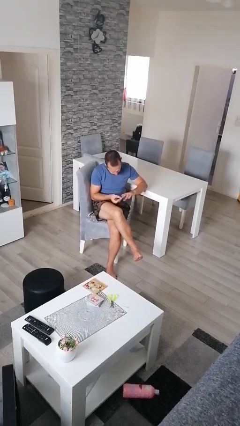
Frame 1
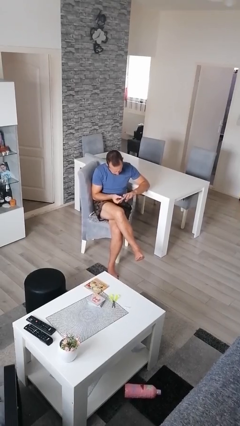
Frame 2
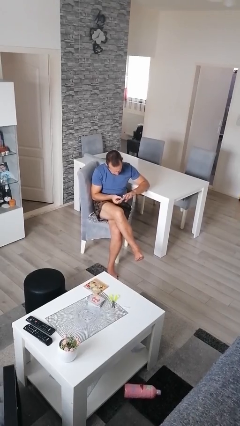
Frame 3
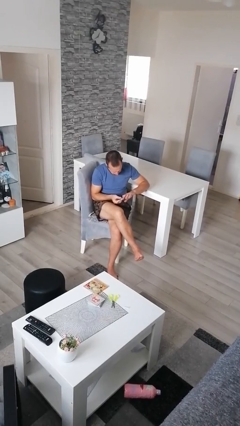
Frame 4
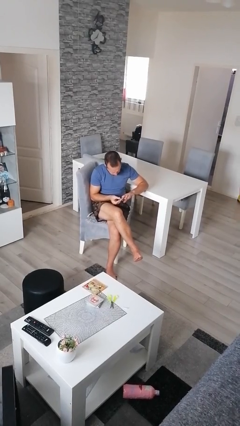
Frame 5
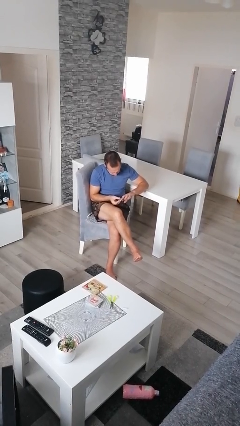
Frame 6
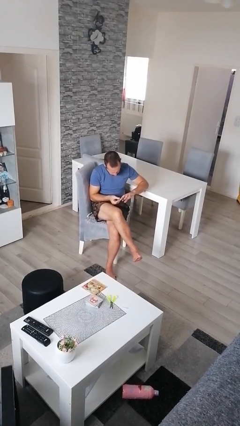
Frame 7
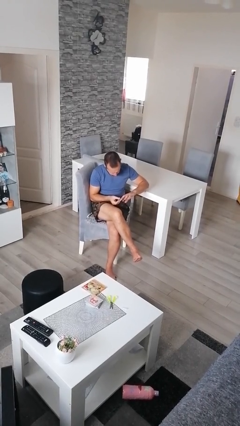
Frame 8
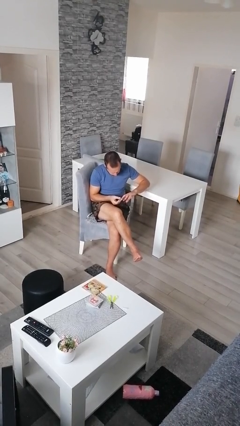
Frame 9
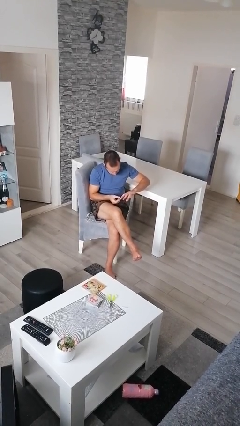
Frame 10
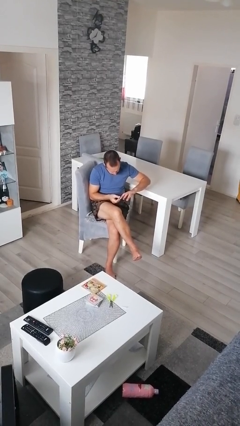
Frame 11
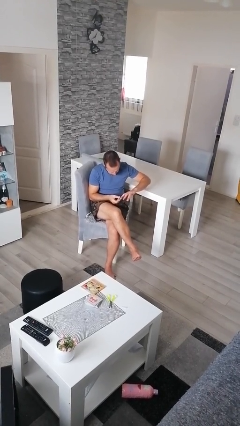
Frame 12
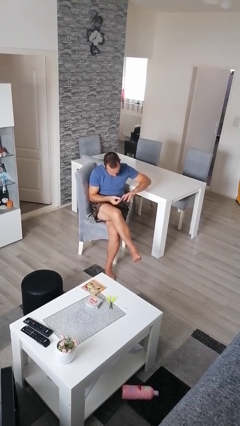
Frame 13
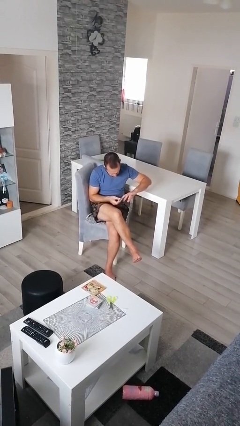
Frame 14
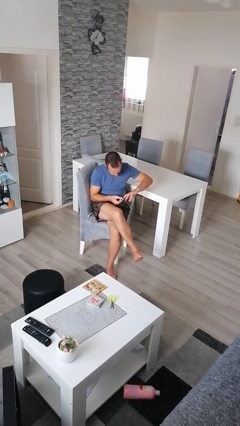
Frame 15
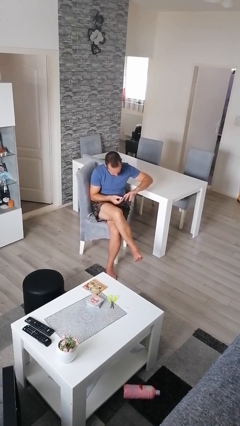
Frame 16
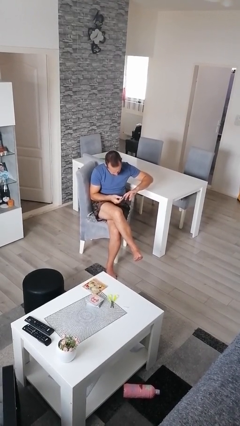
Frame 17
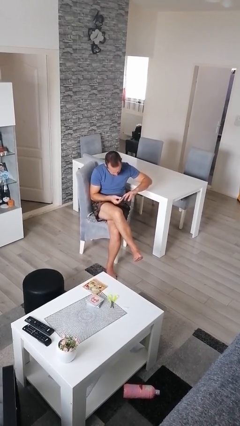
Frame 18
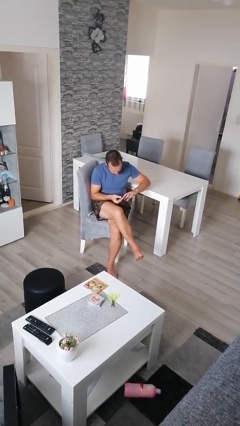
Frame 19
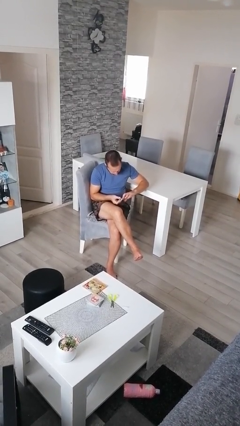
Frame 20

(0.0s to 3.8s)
person clips fingernails

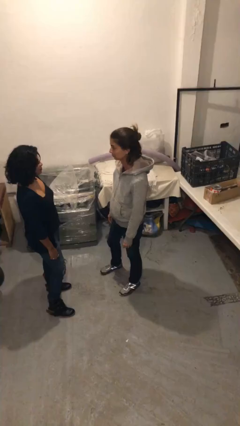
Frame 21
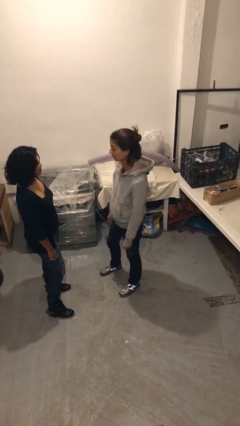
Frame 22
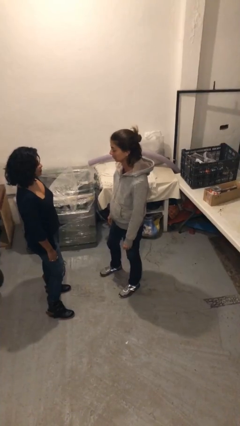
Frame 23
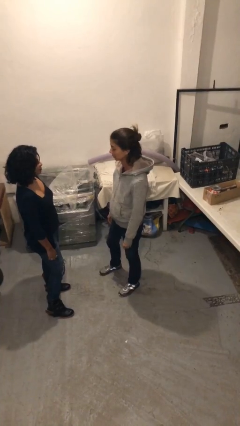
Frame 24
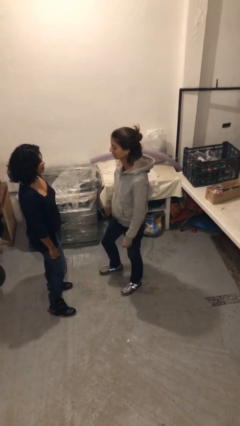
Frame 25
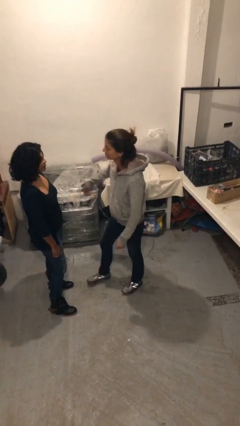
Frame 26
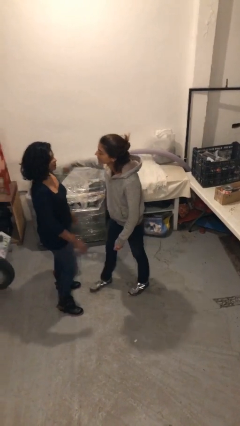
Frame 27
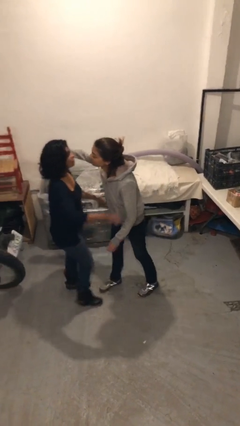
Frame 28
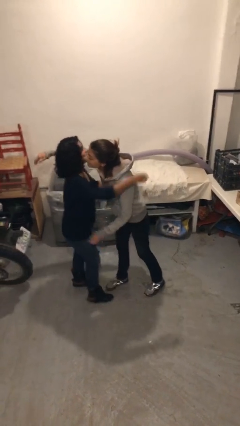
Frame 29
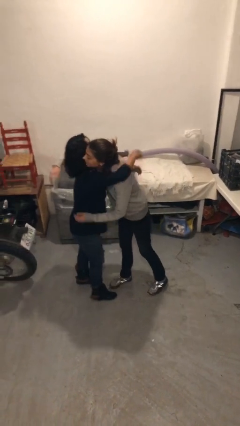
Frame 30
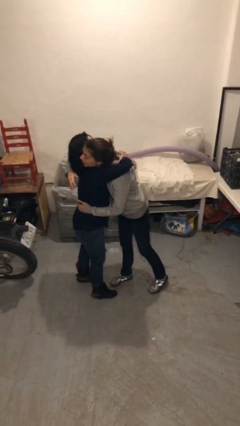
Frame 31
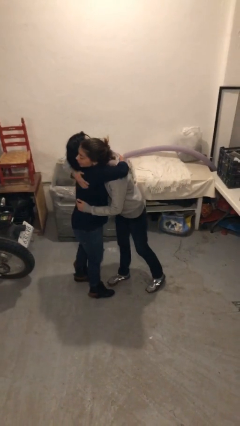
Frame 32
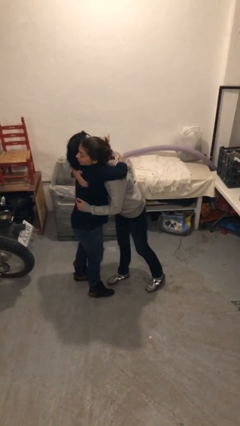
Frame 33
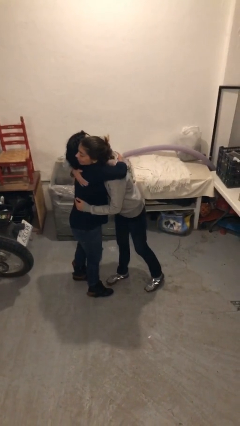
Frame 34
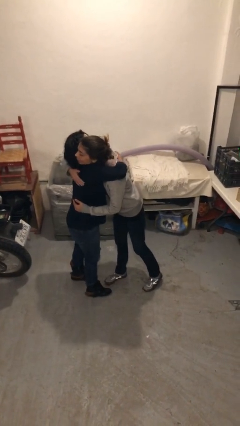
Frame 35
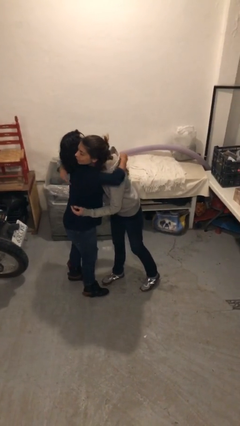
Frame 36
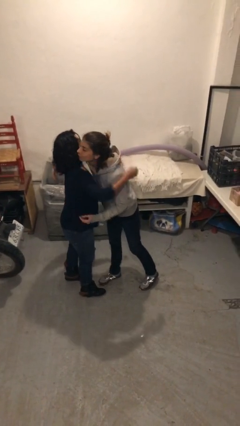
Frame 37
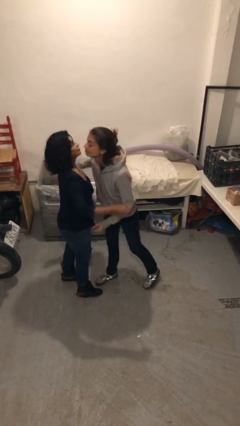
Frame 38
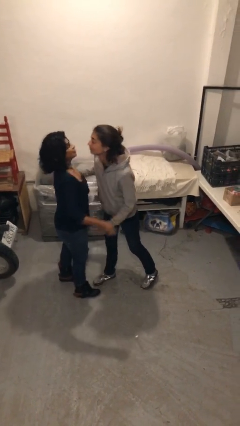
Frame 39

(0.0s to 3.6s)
person embraces person

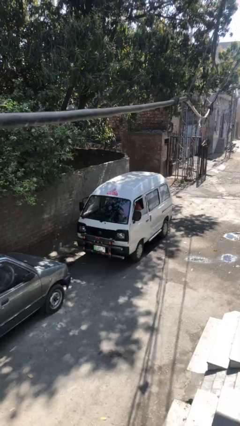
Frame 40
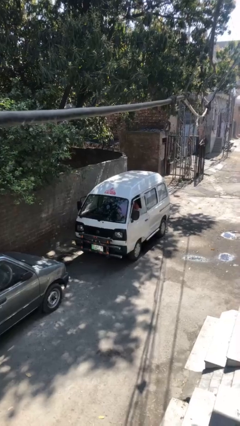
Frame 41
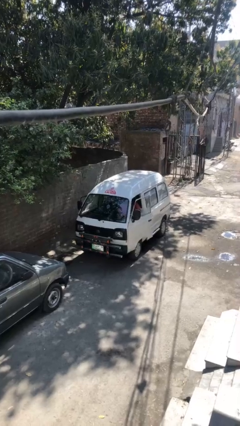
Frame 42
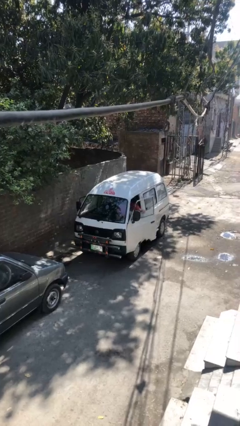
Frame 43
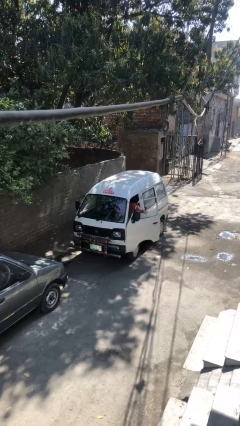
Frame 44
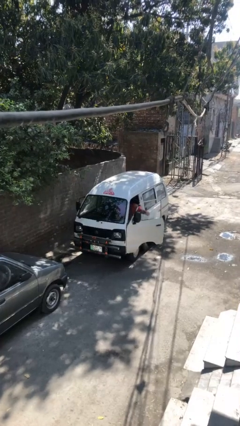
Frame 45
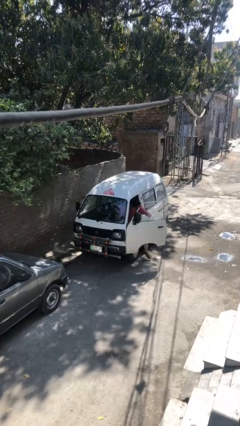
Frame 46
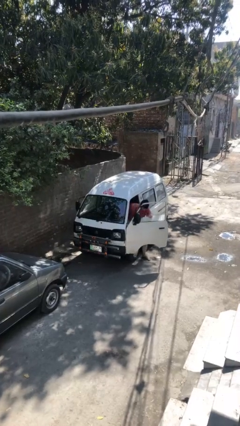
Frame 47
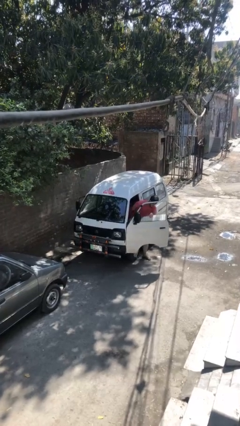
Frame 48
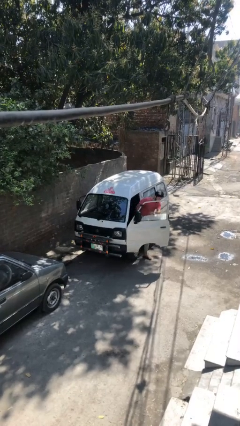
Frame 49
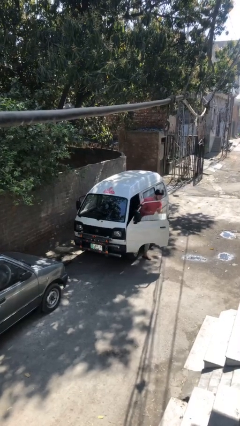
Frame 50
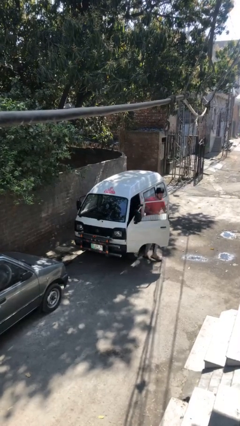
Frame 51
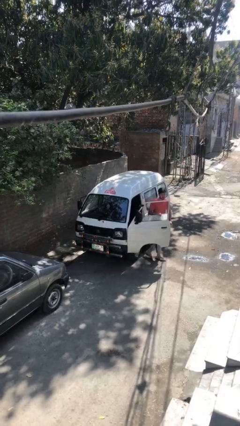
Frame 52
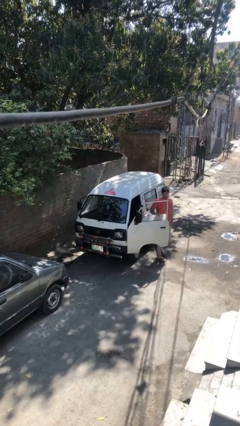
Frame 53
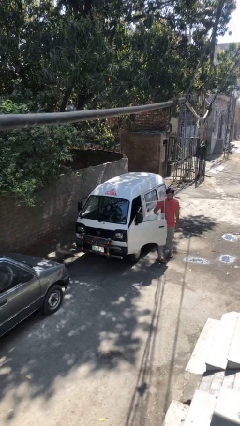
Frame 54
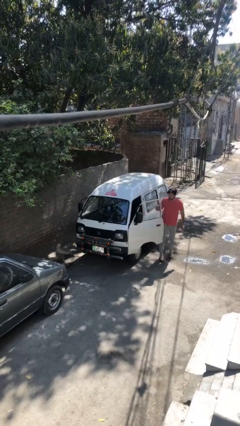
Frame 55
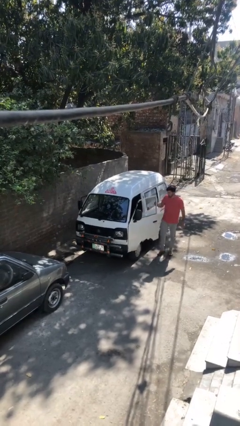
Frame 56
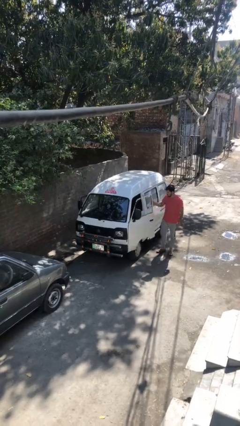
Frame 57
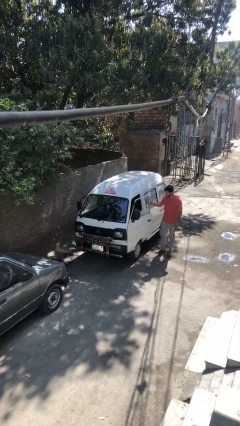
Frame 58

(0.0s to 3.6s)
car drops off person

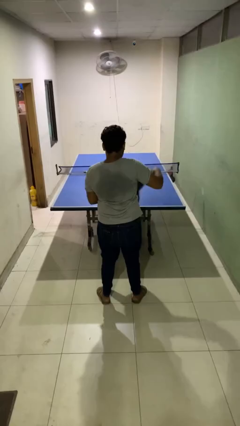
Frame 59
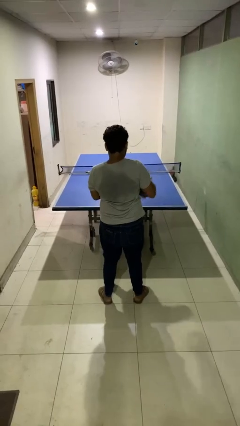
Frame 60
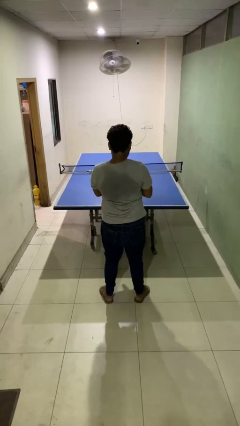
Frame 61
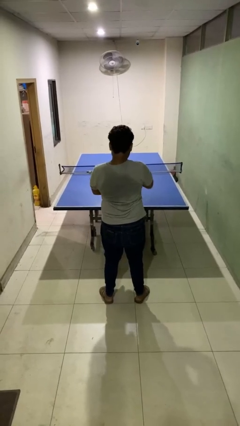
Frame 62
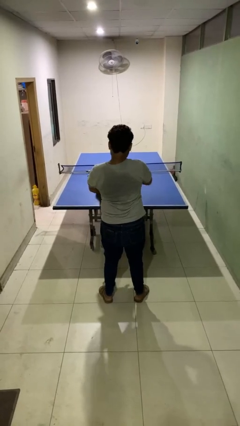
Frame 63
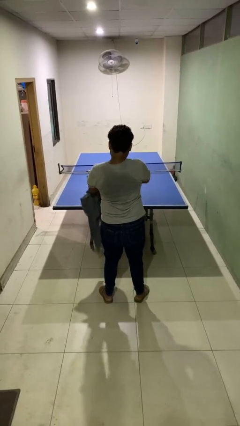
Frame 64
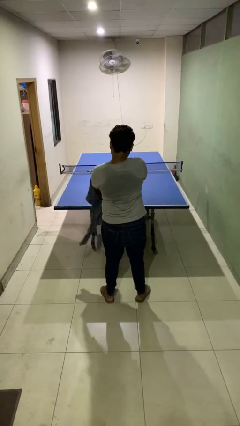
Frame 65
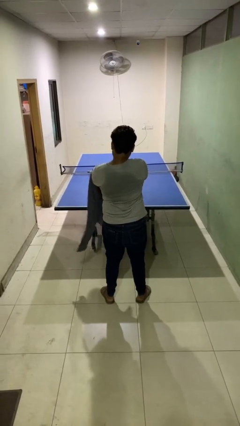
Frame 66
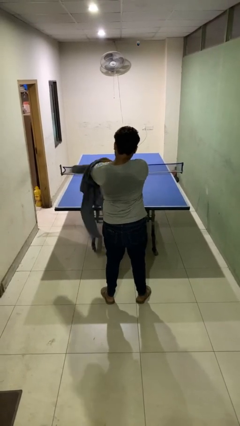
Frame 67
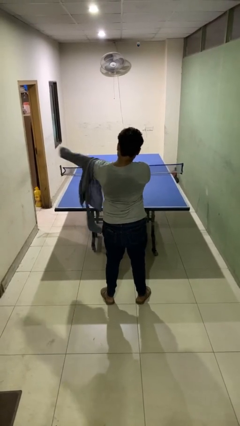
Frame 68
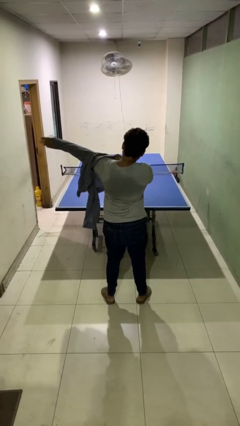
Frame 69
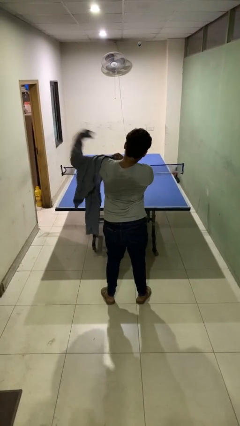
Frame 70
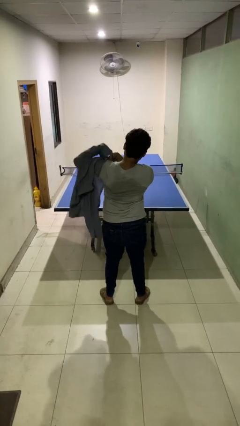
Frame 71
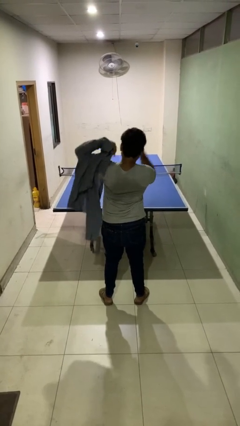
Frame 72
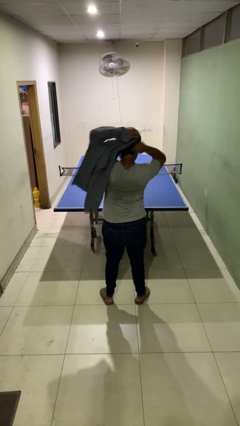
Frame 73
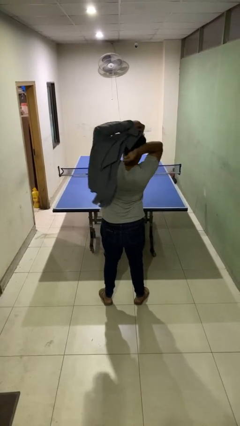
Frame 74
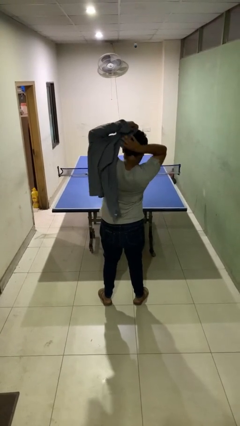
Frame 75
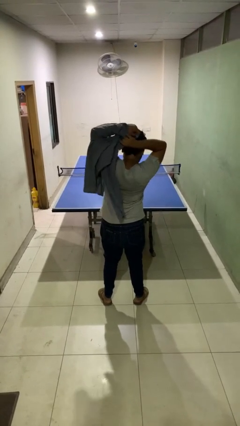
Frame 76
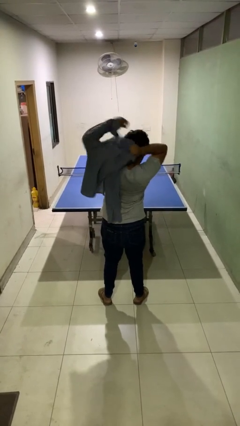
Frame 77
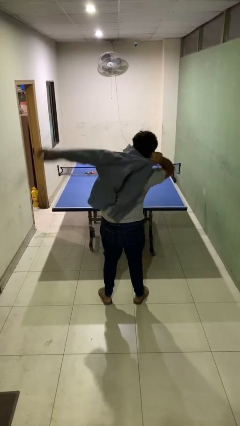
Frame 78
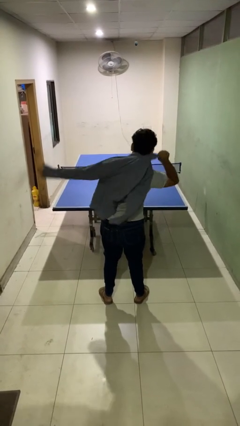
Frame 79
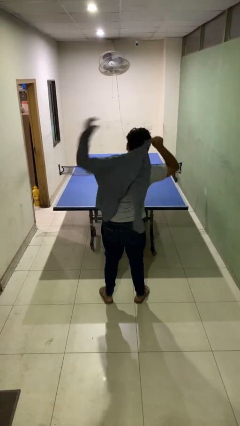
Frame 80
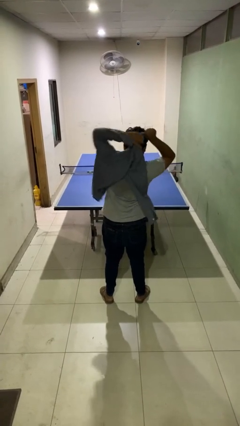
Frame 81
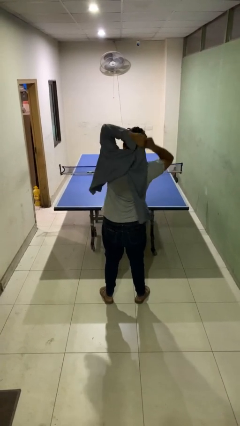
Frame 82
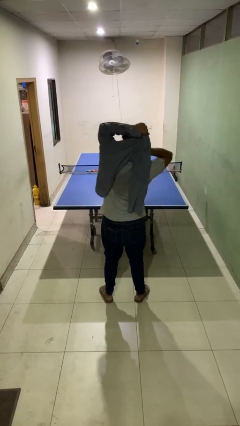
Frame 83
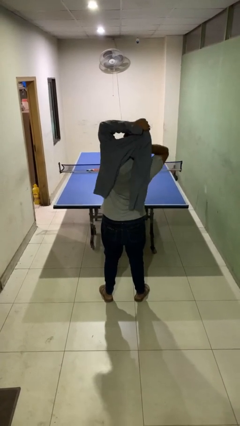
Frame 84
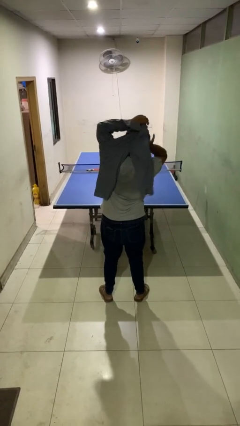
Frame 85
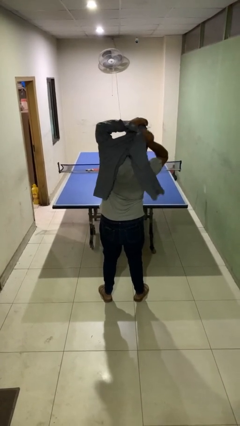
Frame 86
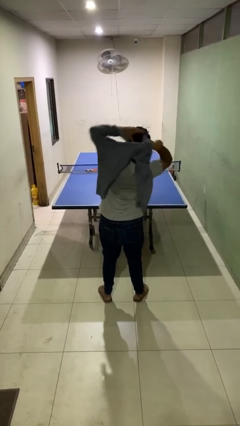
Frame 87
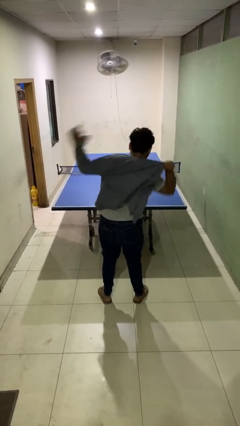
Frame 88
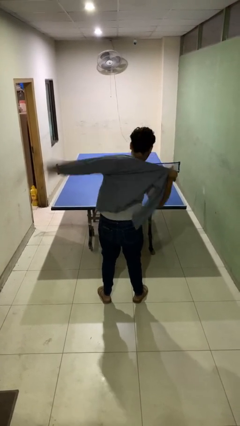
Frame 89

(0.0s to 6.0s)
person puts on shirt

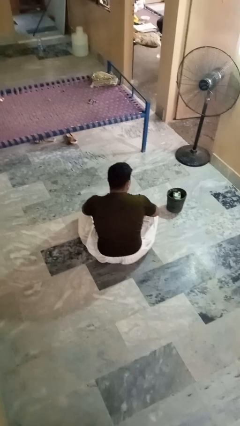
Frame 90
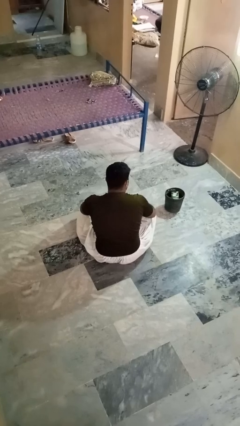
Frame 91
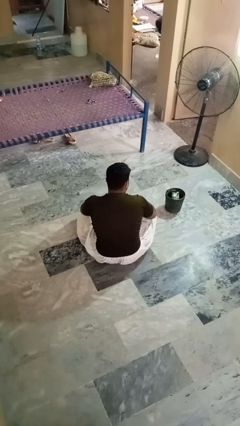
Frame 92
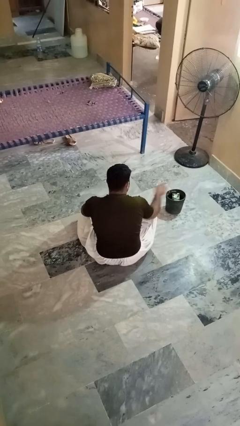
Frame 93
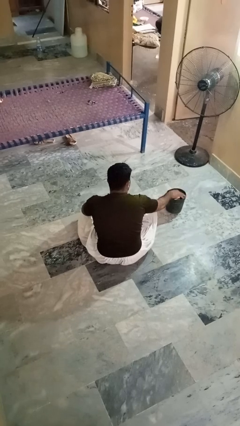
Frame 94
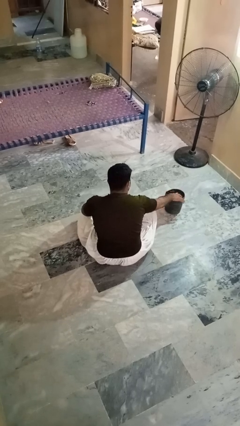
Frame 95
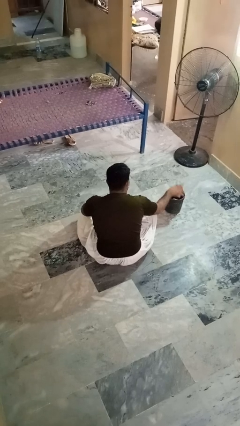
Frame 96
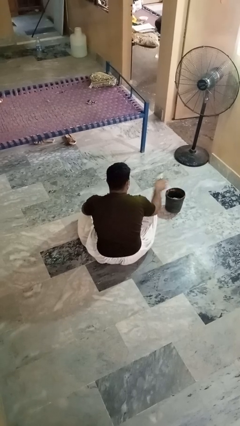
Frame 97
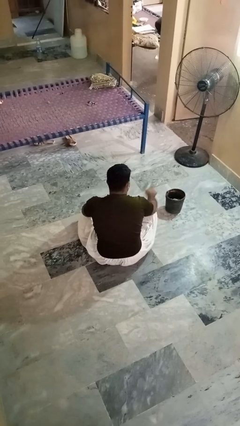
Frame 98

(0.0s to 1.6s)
person takes object from basket
